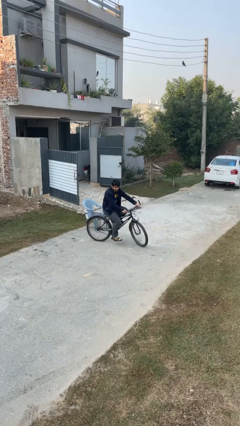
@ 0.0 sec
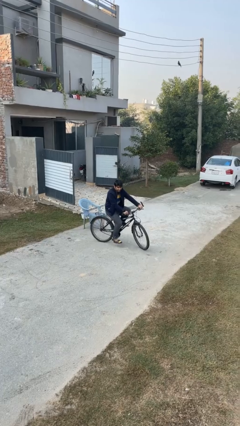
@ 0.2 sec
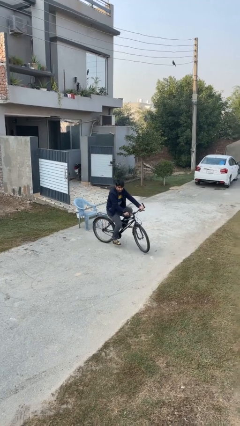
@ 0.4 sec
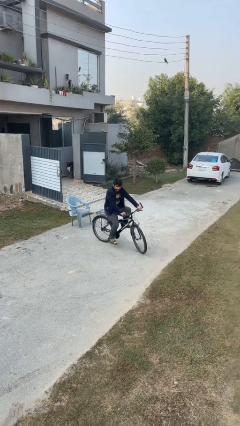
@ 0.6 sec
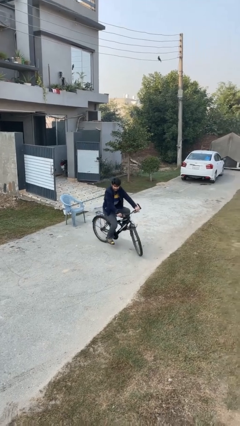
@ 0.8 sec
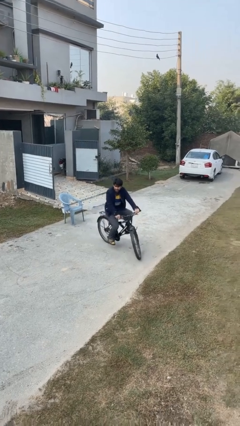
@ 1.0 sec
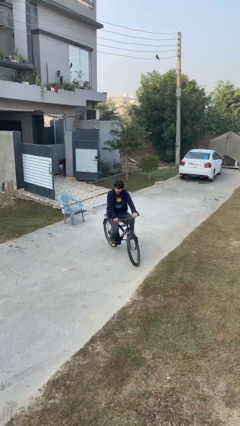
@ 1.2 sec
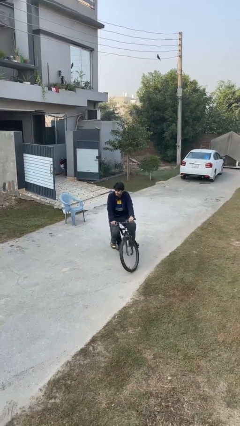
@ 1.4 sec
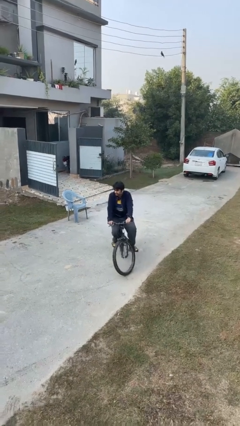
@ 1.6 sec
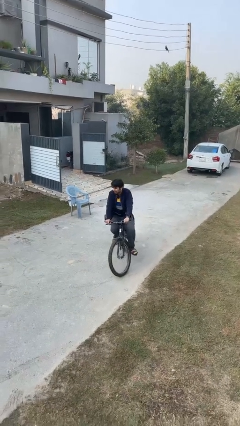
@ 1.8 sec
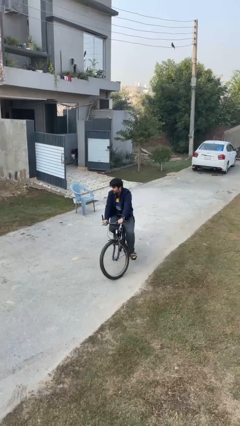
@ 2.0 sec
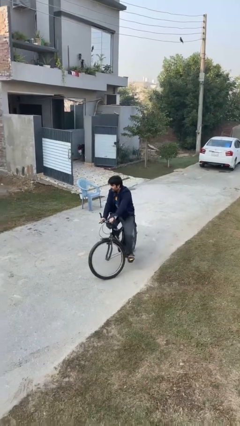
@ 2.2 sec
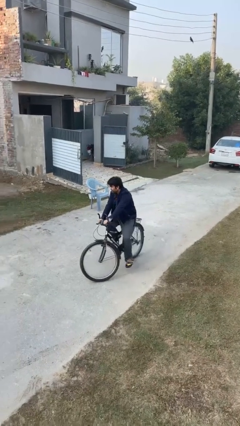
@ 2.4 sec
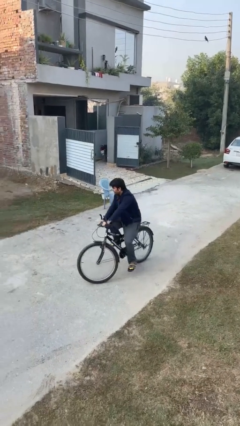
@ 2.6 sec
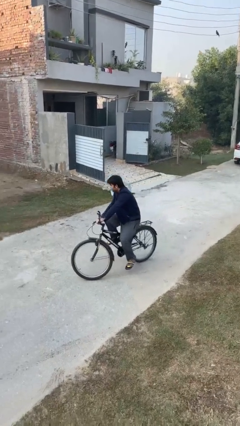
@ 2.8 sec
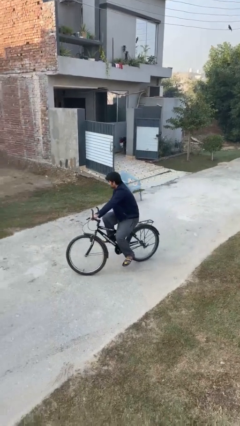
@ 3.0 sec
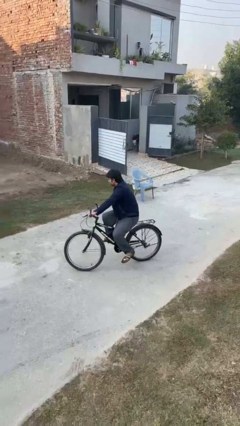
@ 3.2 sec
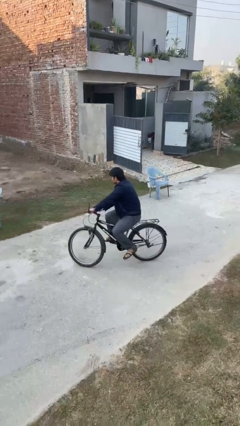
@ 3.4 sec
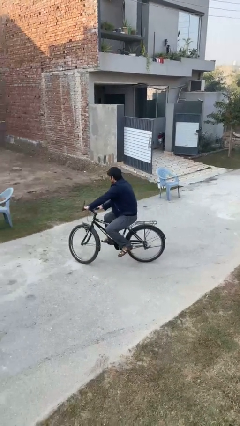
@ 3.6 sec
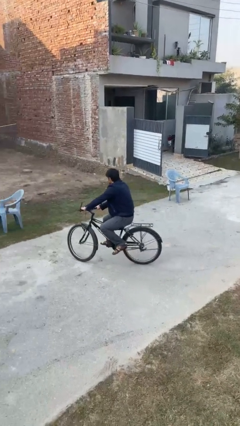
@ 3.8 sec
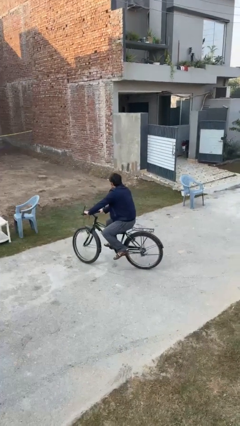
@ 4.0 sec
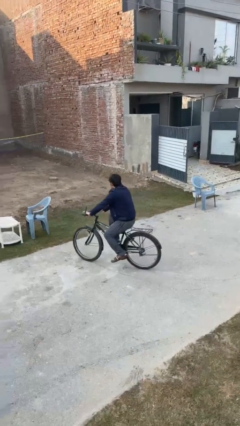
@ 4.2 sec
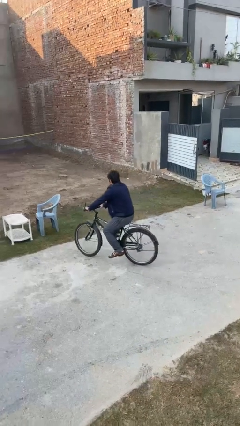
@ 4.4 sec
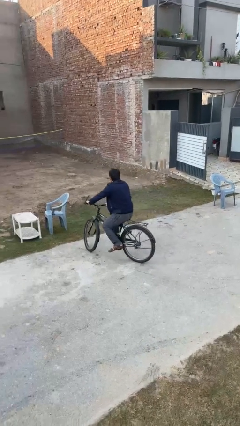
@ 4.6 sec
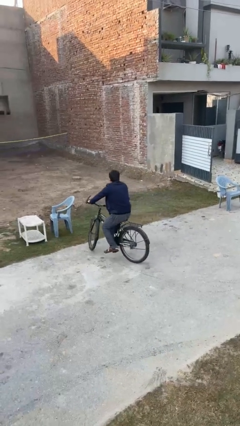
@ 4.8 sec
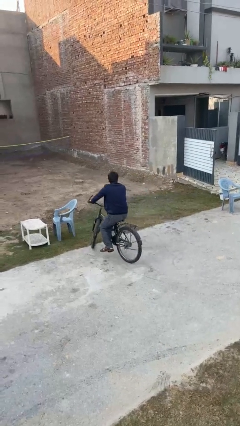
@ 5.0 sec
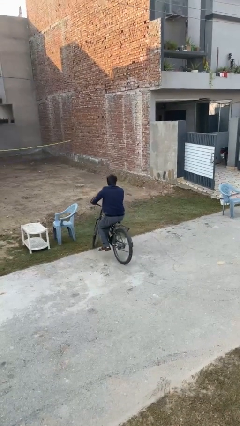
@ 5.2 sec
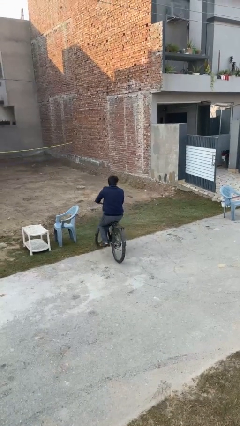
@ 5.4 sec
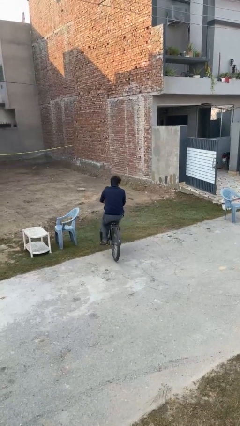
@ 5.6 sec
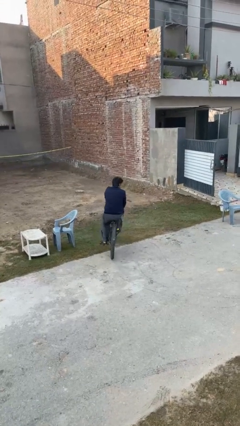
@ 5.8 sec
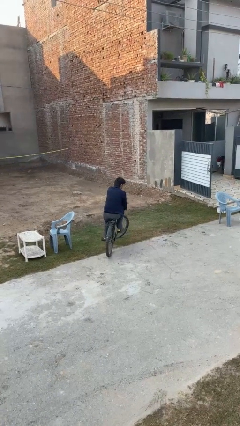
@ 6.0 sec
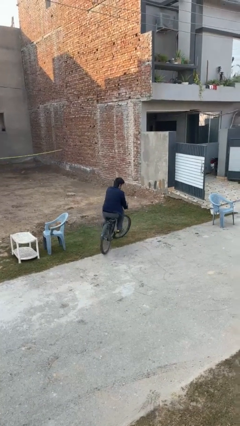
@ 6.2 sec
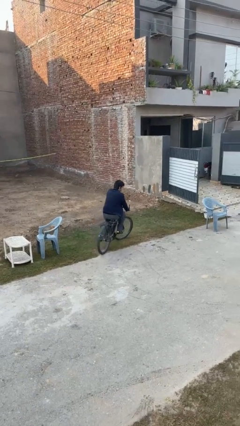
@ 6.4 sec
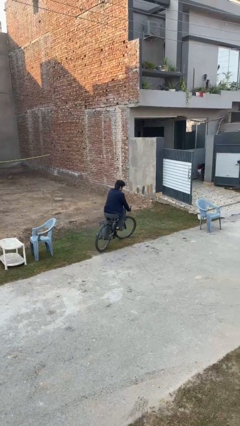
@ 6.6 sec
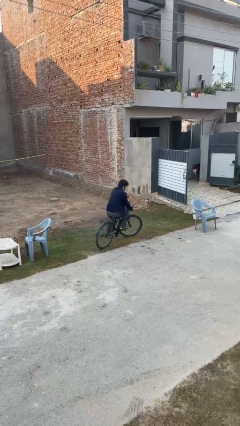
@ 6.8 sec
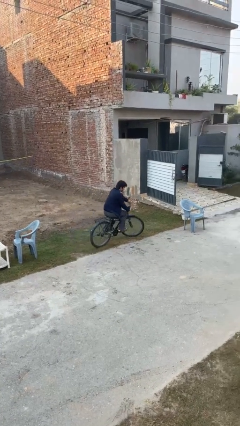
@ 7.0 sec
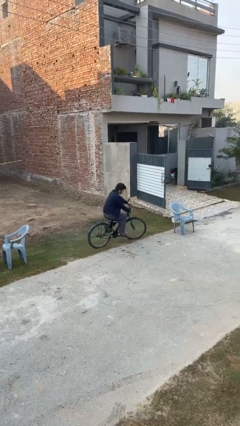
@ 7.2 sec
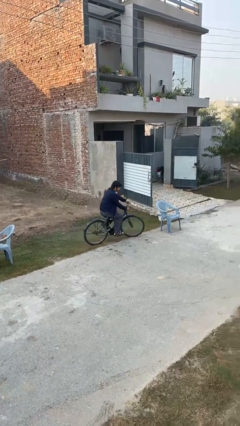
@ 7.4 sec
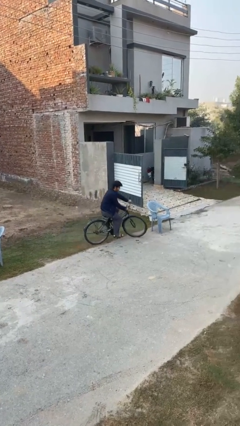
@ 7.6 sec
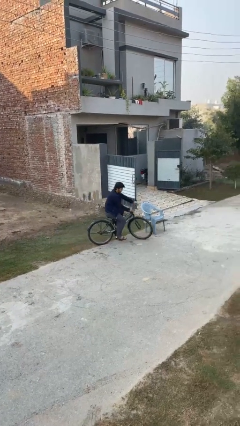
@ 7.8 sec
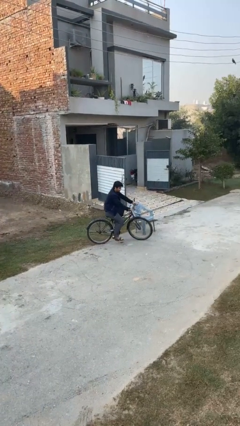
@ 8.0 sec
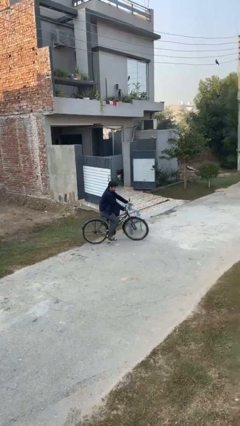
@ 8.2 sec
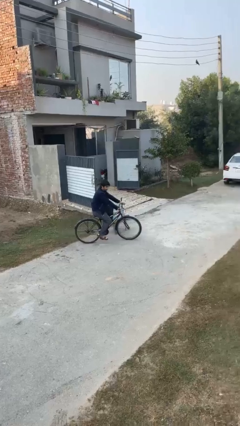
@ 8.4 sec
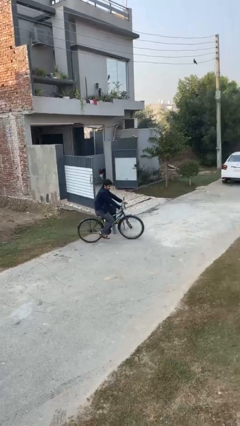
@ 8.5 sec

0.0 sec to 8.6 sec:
person rides bicycle

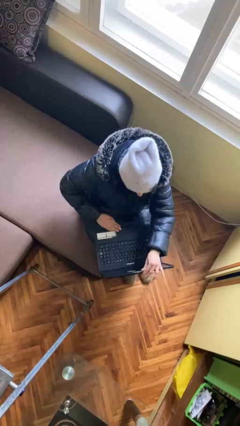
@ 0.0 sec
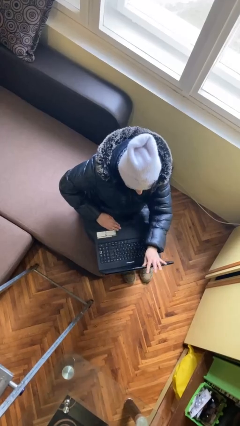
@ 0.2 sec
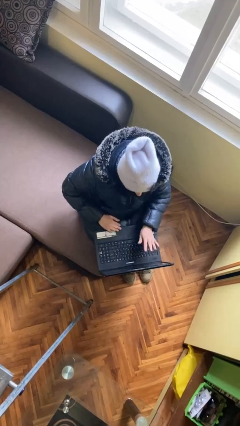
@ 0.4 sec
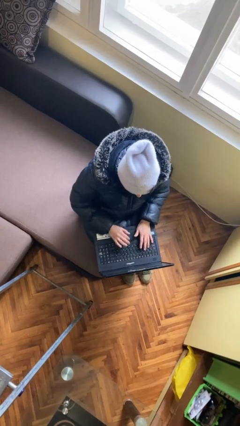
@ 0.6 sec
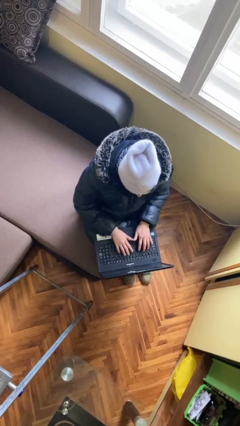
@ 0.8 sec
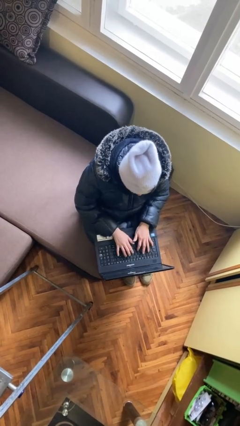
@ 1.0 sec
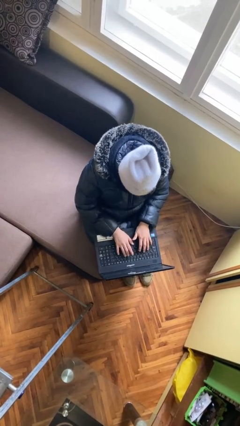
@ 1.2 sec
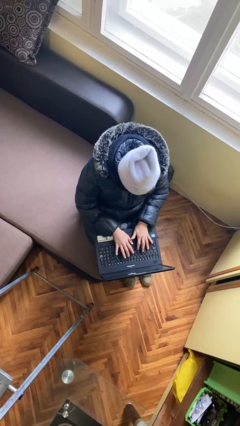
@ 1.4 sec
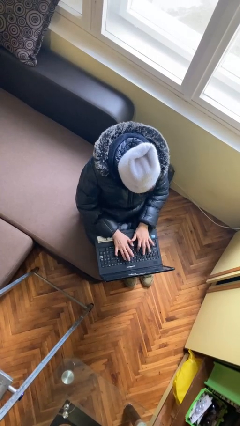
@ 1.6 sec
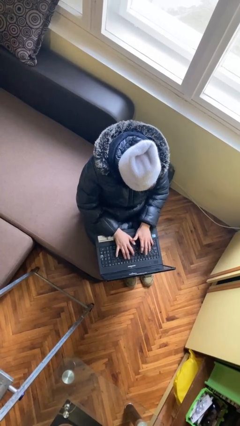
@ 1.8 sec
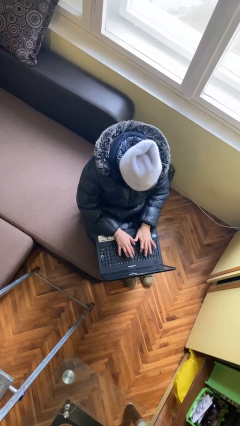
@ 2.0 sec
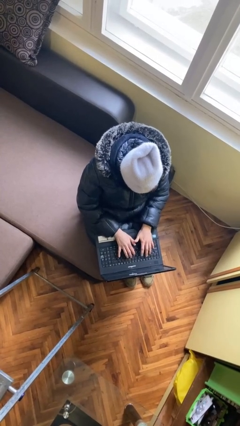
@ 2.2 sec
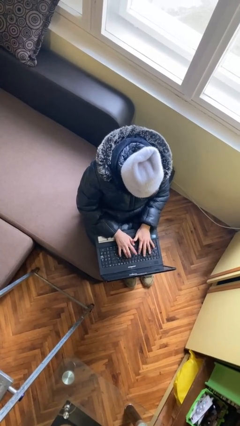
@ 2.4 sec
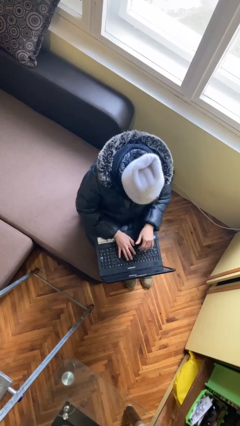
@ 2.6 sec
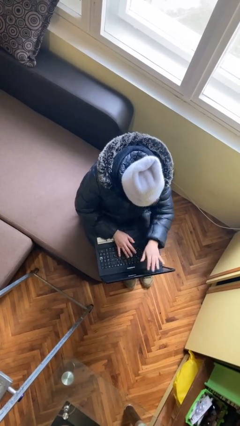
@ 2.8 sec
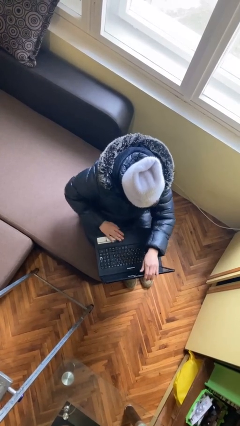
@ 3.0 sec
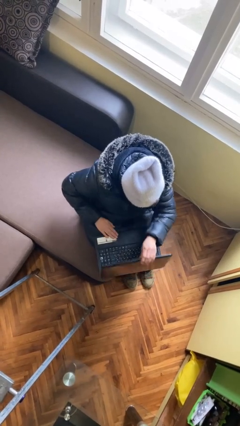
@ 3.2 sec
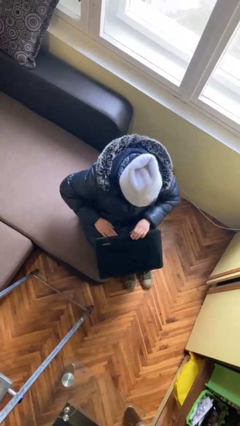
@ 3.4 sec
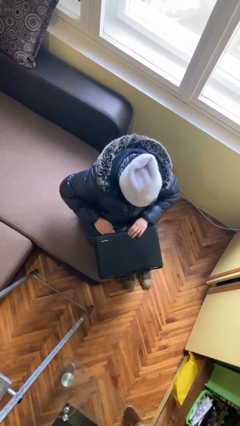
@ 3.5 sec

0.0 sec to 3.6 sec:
person interacts with laptop

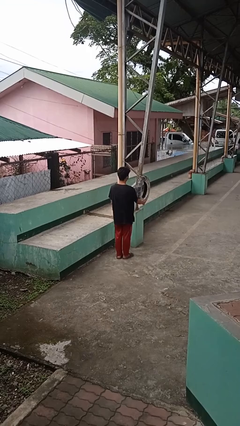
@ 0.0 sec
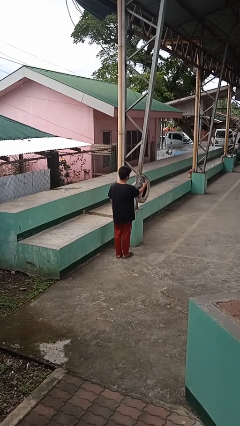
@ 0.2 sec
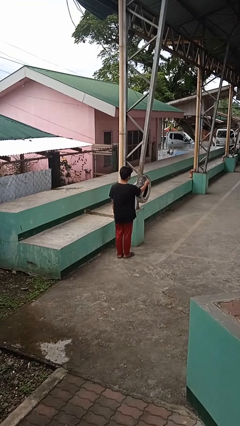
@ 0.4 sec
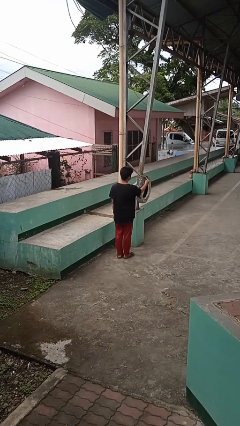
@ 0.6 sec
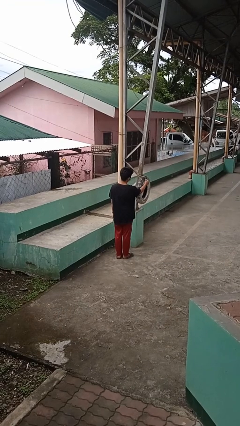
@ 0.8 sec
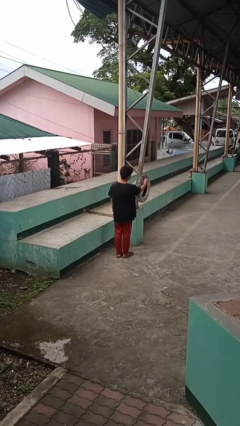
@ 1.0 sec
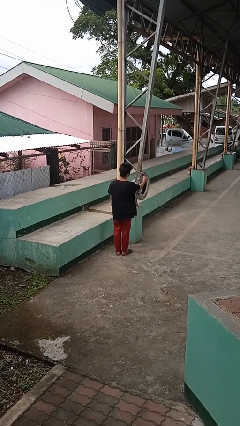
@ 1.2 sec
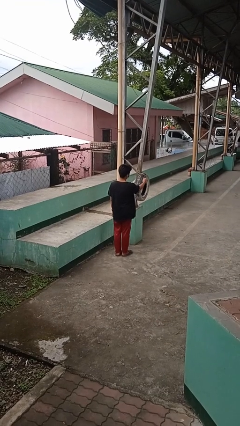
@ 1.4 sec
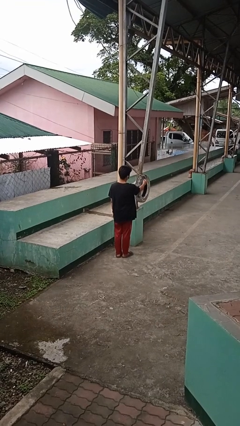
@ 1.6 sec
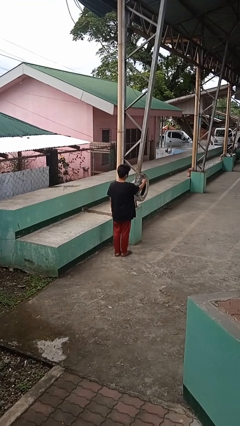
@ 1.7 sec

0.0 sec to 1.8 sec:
person taps object with finger

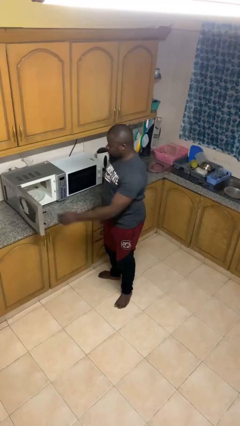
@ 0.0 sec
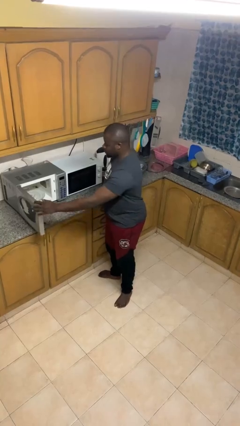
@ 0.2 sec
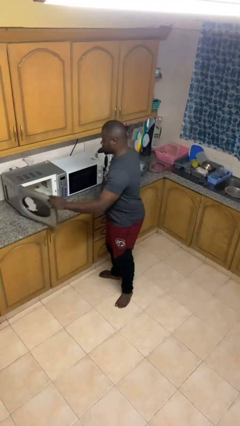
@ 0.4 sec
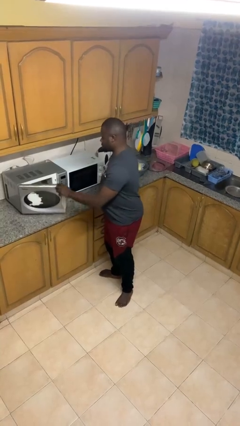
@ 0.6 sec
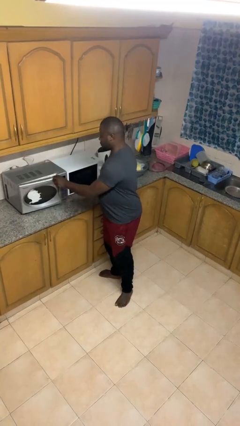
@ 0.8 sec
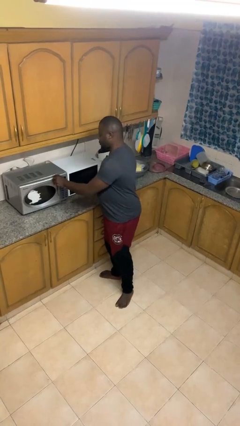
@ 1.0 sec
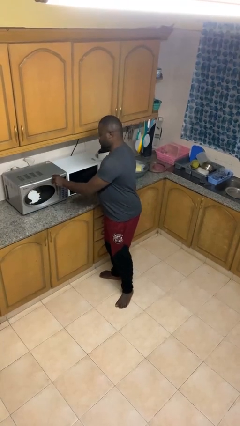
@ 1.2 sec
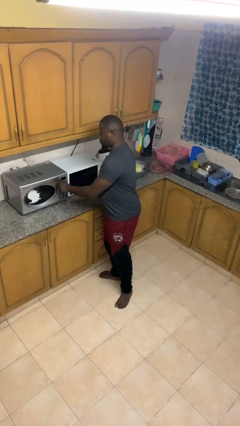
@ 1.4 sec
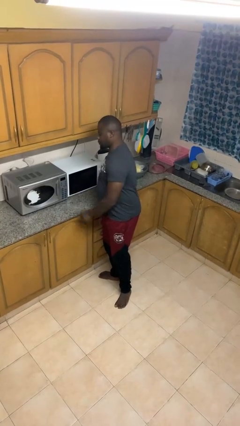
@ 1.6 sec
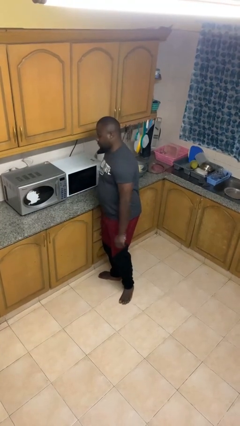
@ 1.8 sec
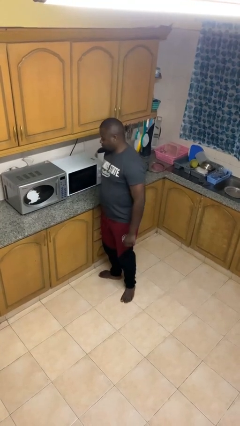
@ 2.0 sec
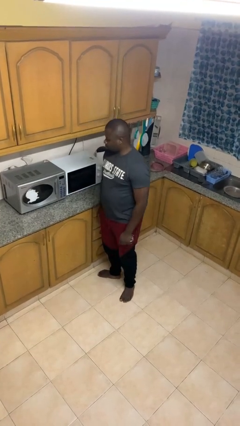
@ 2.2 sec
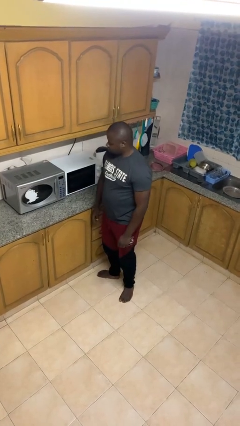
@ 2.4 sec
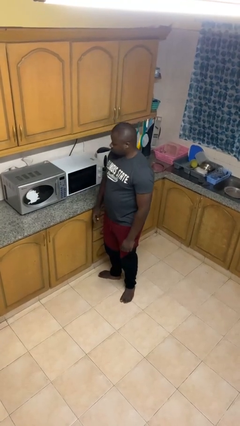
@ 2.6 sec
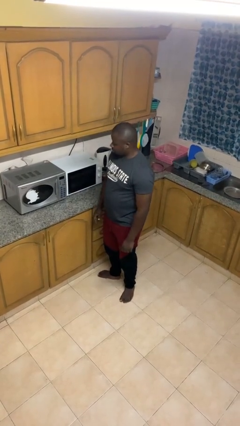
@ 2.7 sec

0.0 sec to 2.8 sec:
person closes microwave

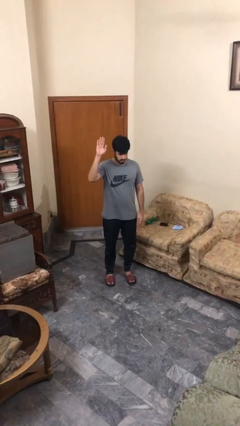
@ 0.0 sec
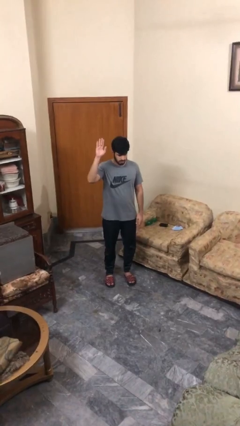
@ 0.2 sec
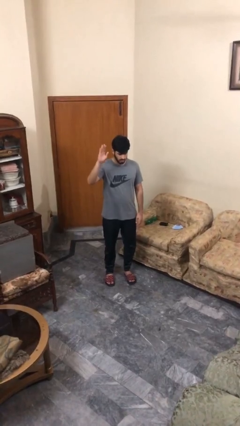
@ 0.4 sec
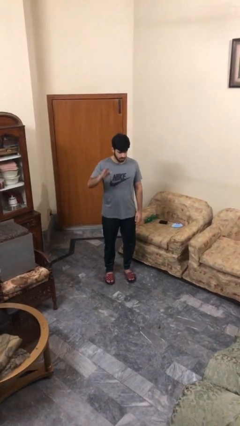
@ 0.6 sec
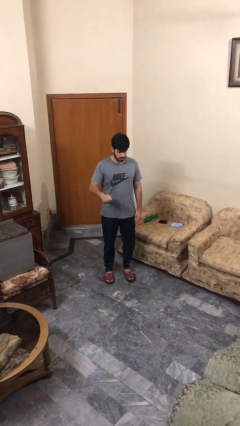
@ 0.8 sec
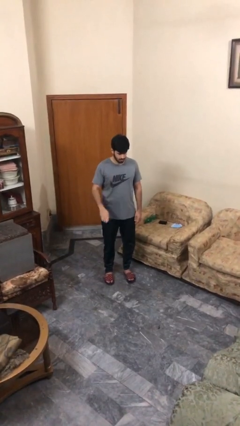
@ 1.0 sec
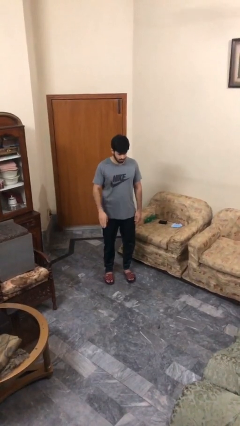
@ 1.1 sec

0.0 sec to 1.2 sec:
person gestures lower hand
